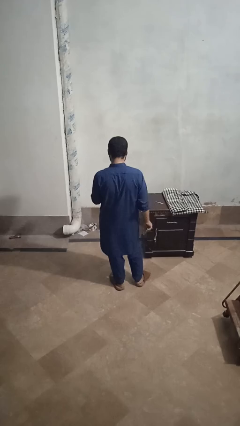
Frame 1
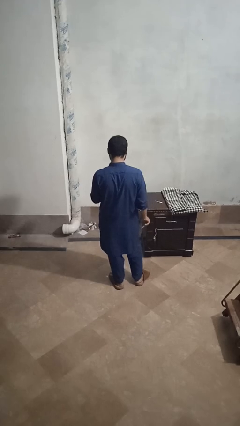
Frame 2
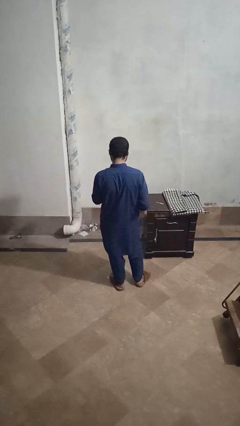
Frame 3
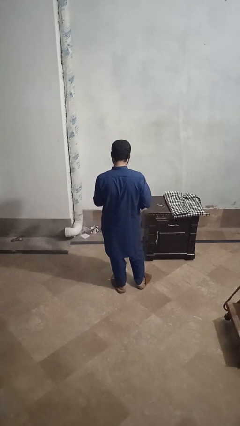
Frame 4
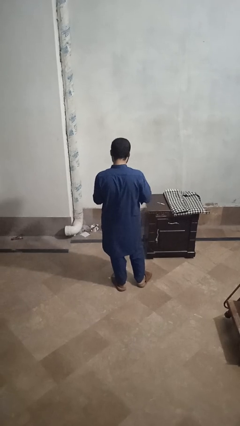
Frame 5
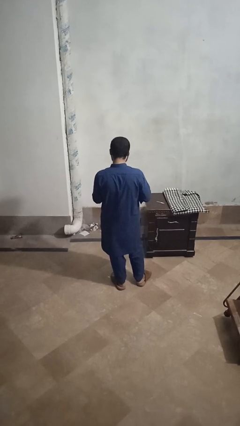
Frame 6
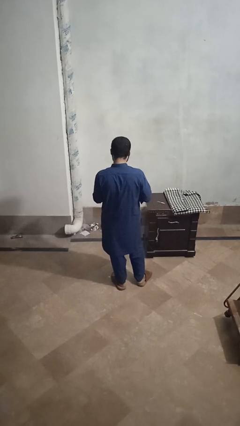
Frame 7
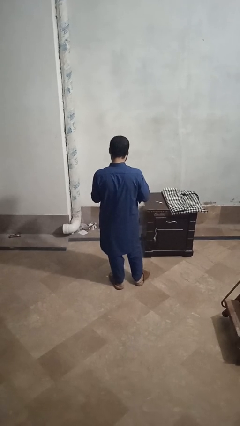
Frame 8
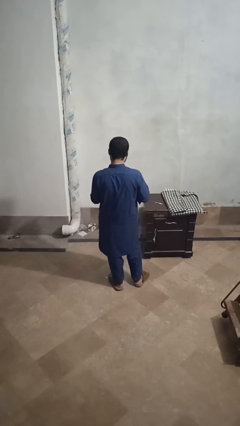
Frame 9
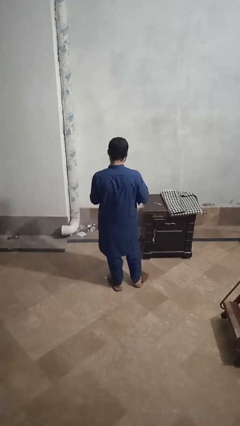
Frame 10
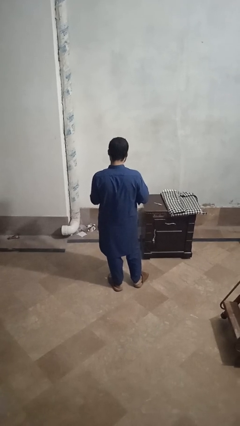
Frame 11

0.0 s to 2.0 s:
person files fingernails

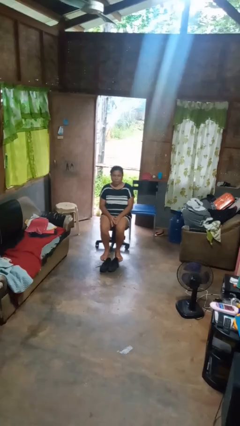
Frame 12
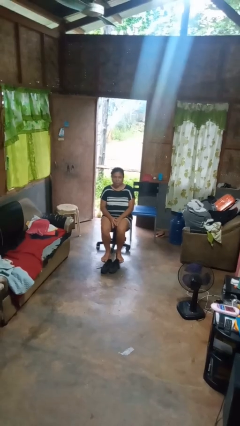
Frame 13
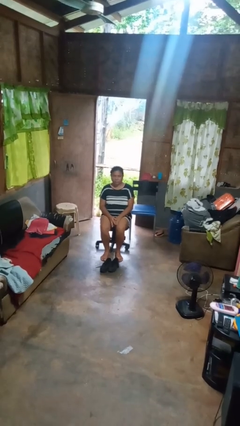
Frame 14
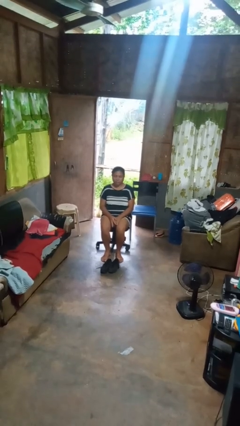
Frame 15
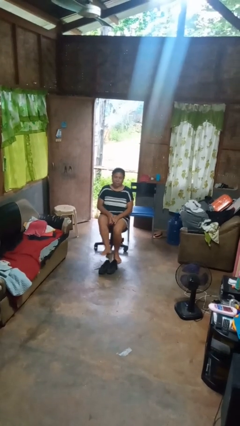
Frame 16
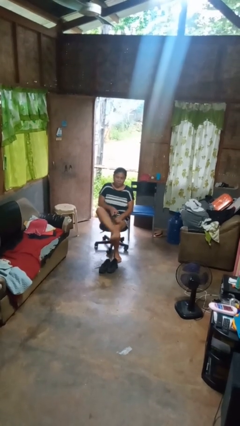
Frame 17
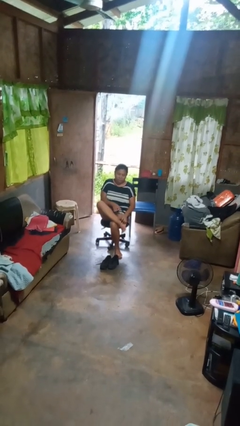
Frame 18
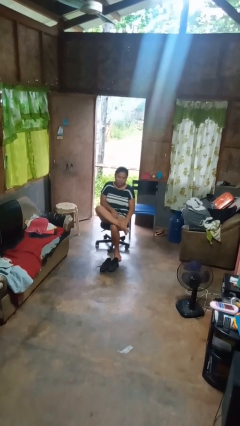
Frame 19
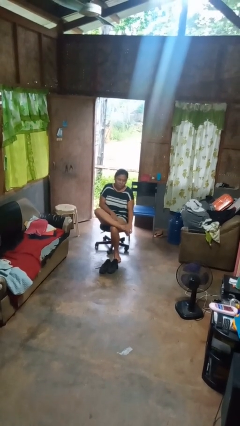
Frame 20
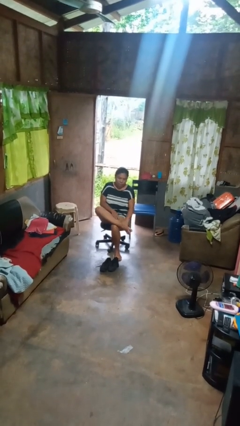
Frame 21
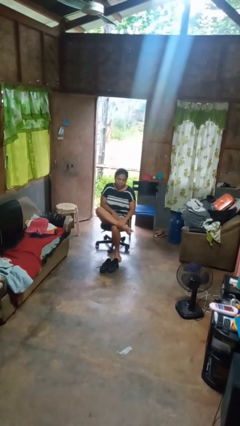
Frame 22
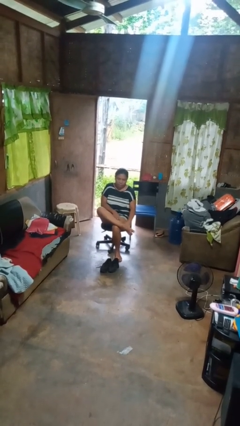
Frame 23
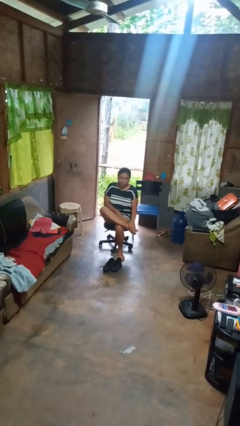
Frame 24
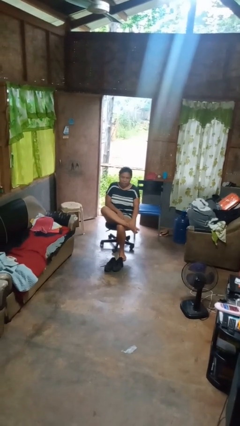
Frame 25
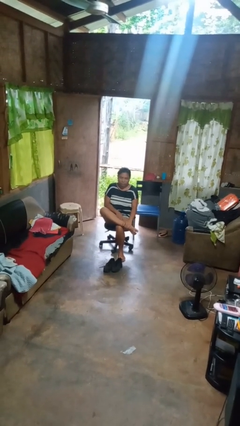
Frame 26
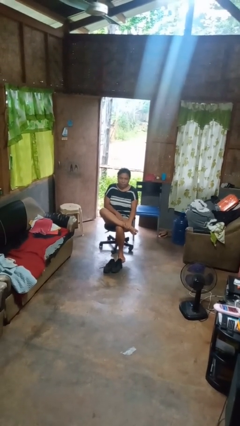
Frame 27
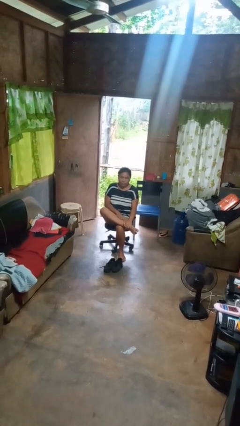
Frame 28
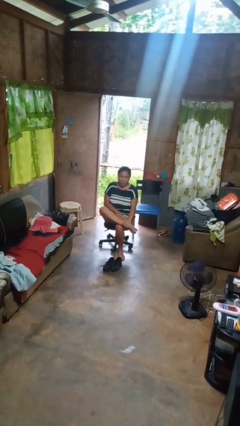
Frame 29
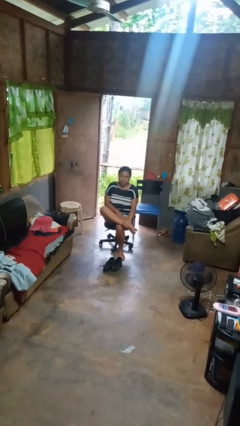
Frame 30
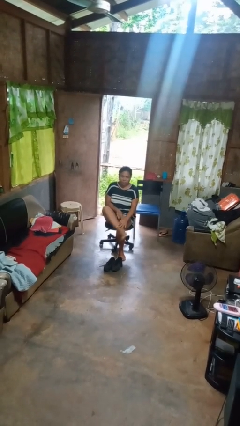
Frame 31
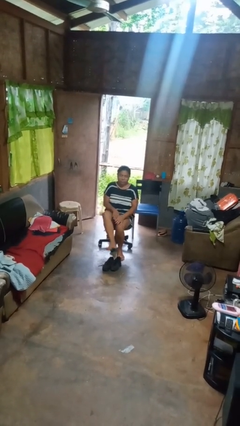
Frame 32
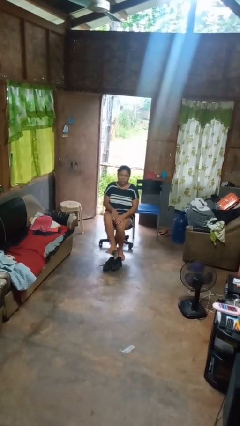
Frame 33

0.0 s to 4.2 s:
person rubs foot

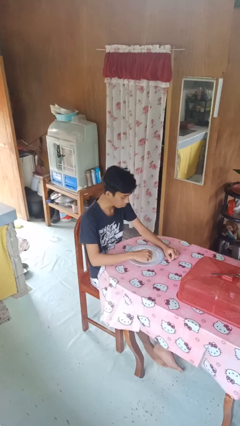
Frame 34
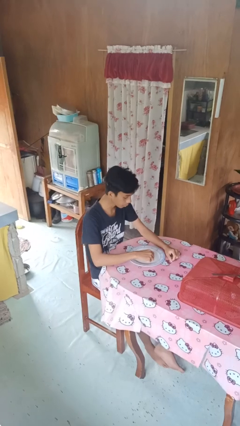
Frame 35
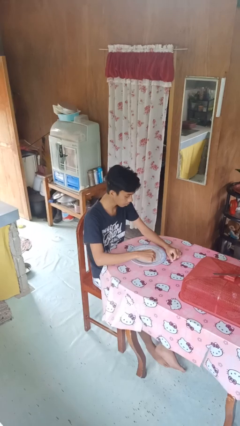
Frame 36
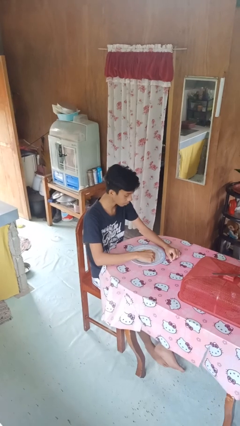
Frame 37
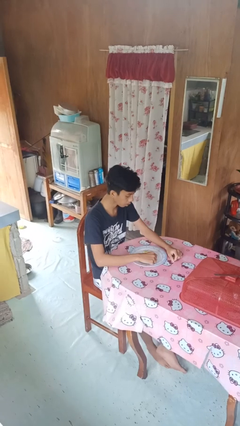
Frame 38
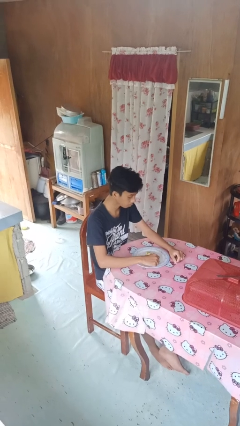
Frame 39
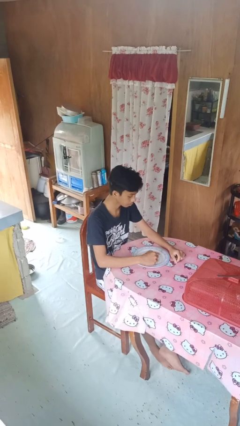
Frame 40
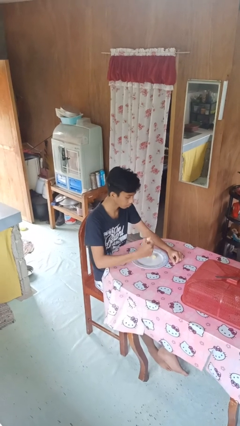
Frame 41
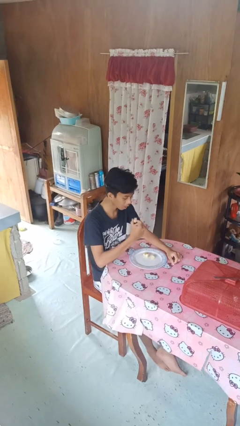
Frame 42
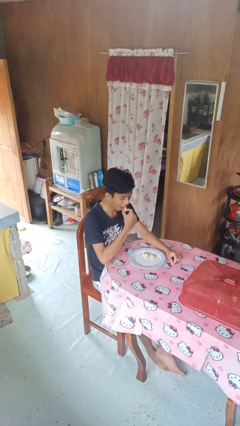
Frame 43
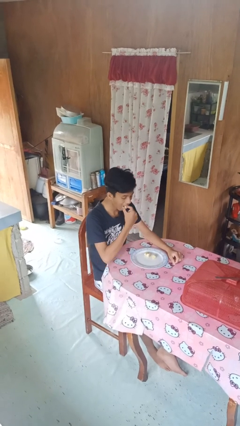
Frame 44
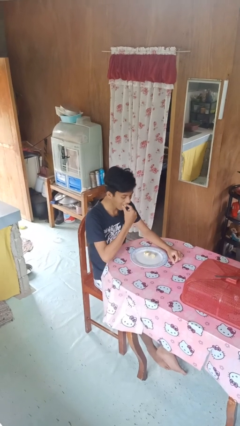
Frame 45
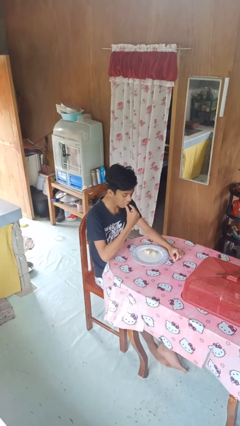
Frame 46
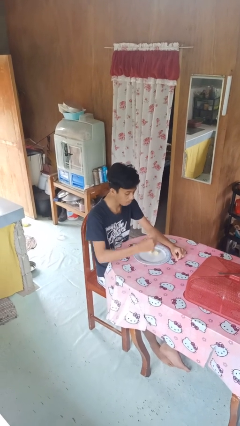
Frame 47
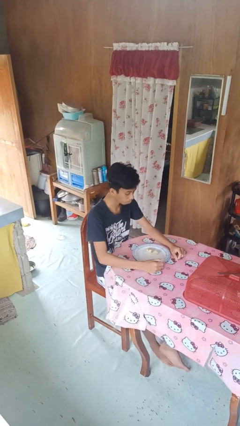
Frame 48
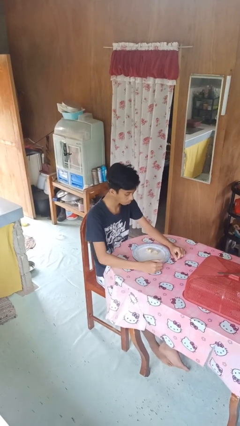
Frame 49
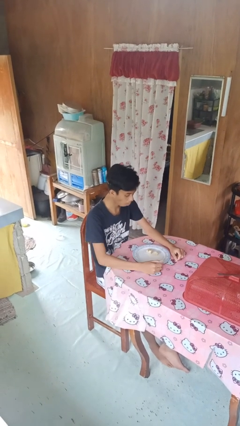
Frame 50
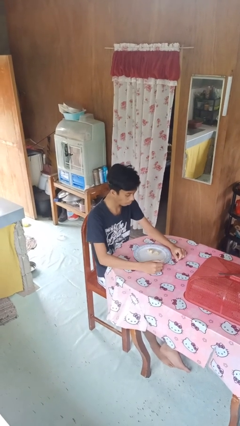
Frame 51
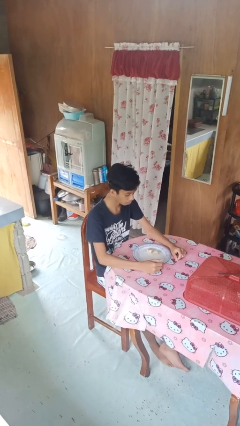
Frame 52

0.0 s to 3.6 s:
person eats with hands

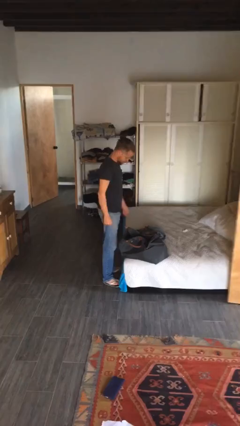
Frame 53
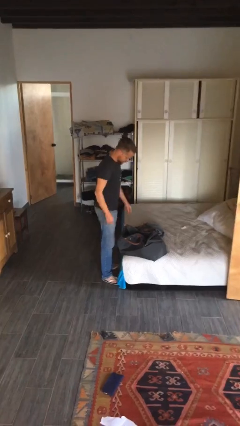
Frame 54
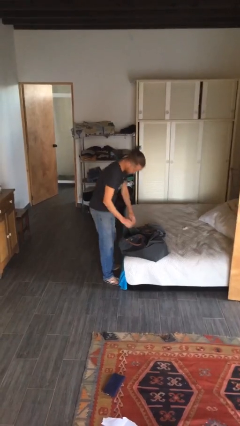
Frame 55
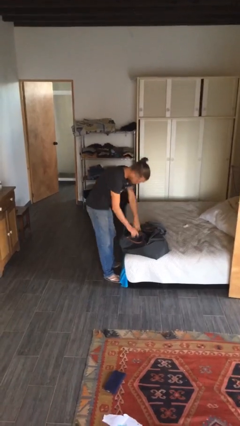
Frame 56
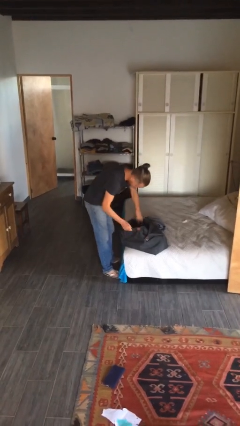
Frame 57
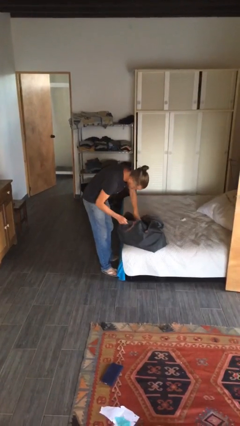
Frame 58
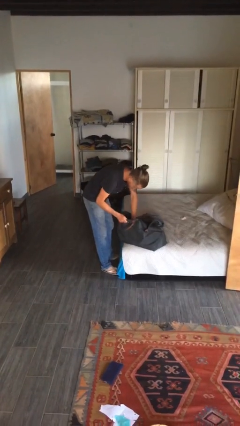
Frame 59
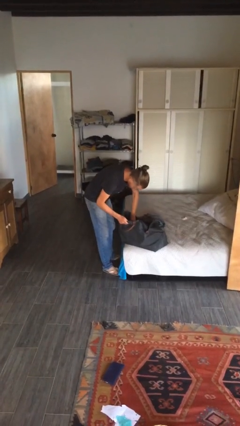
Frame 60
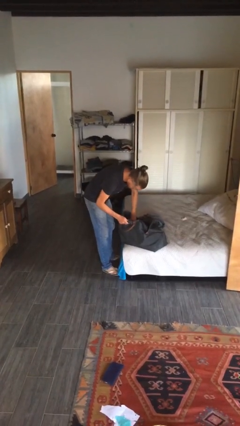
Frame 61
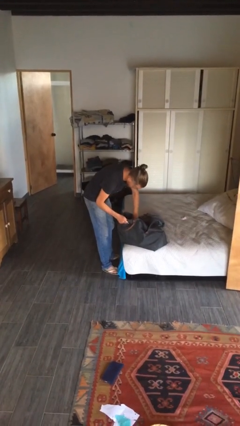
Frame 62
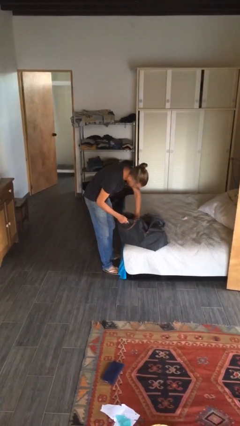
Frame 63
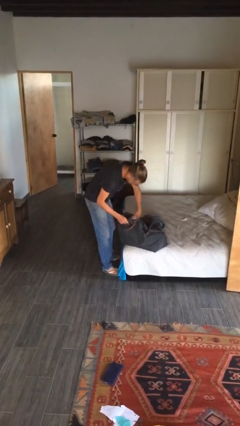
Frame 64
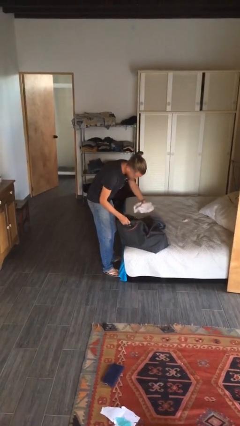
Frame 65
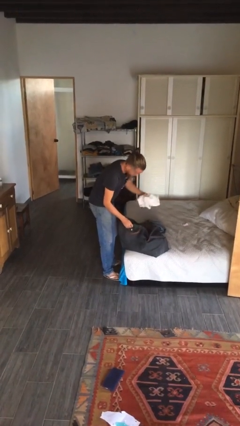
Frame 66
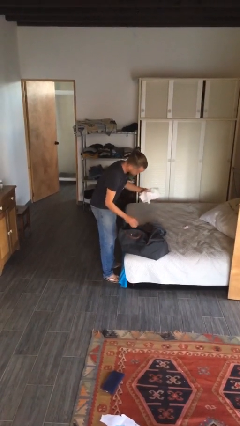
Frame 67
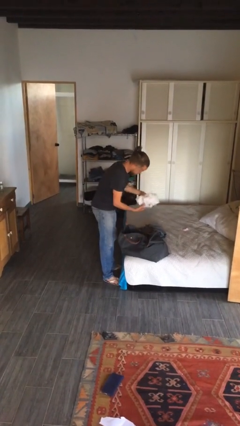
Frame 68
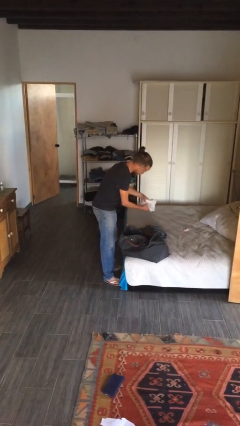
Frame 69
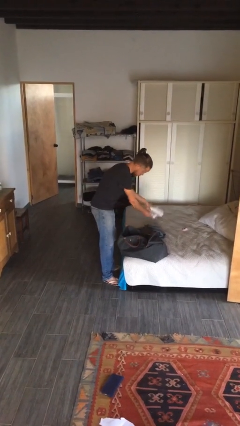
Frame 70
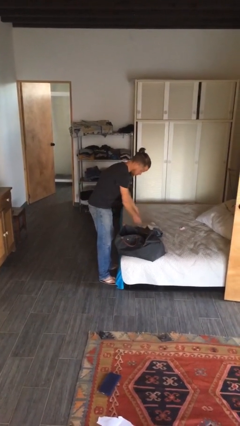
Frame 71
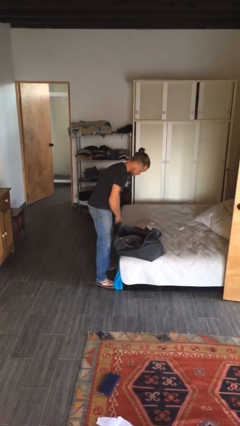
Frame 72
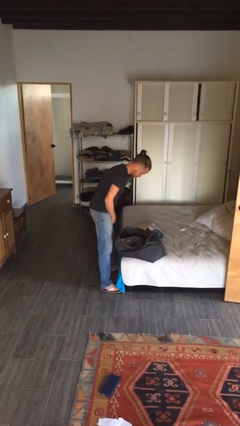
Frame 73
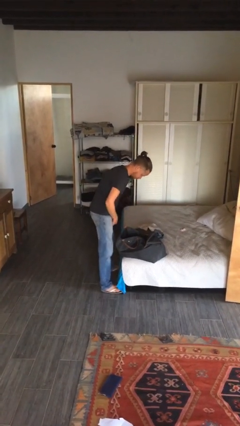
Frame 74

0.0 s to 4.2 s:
person unloads clothes from suitcase

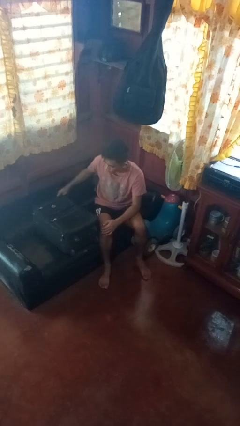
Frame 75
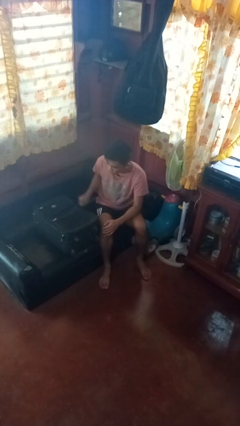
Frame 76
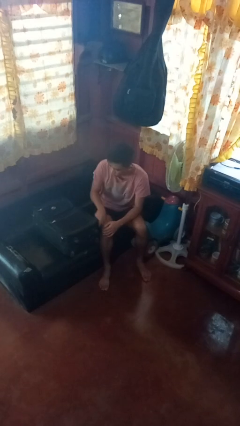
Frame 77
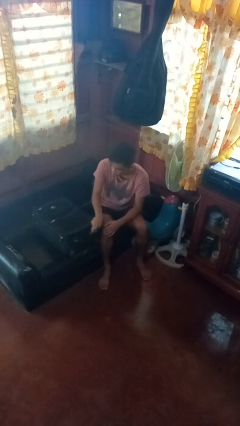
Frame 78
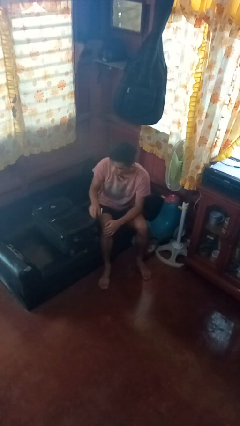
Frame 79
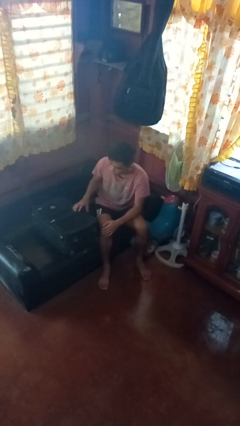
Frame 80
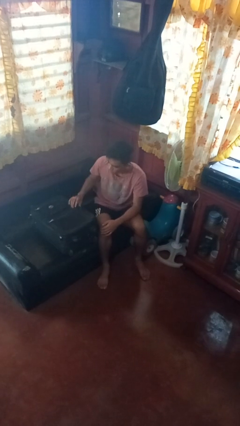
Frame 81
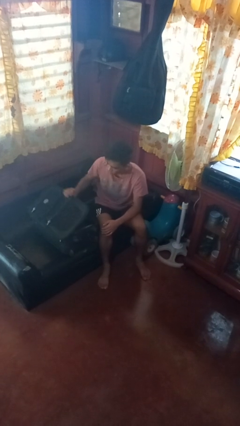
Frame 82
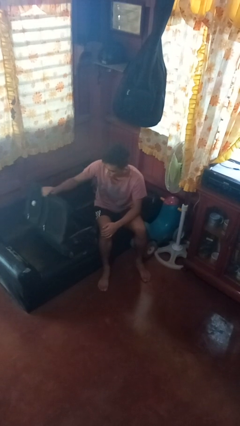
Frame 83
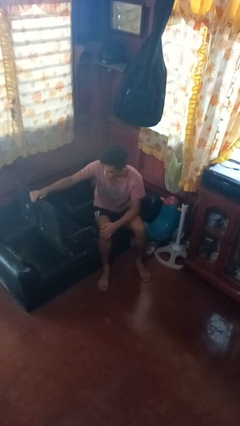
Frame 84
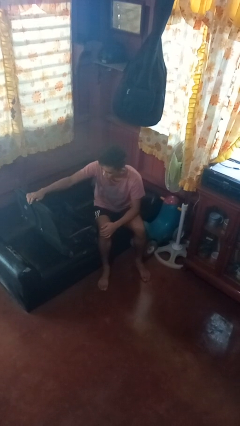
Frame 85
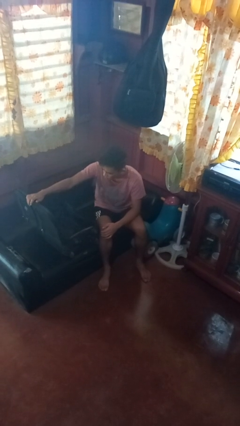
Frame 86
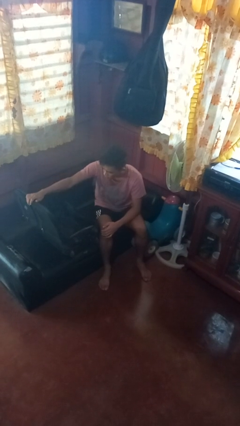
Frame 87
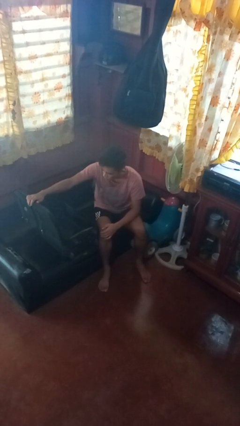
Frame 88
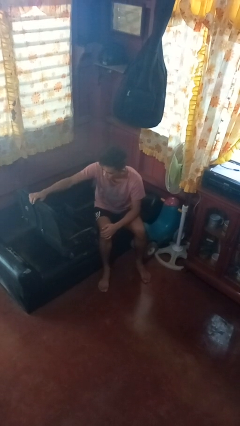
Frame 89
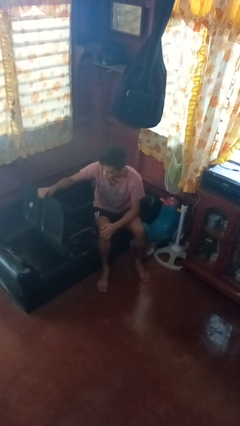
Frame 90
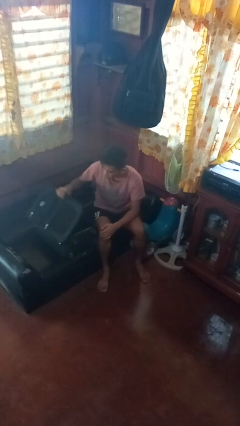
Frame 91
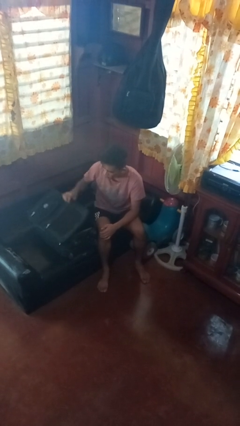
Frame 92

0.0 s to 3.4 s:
person opens suitcase

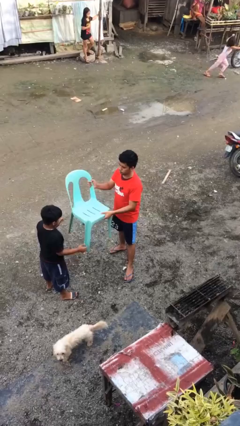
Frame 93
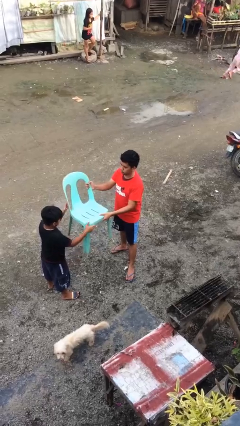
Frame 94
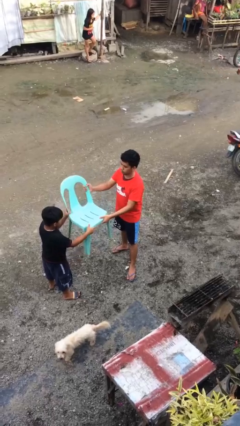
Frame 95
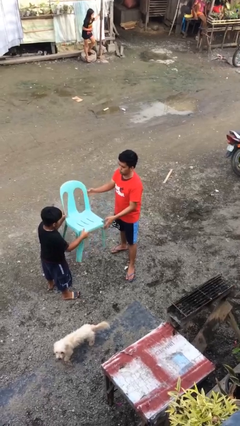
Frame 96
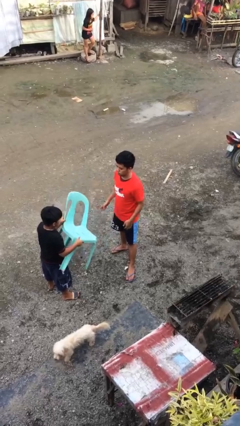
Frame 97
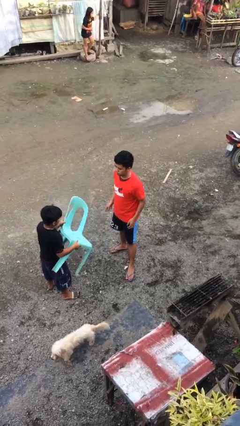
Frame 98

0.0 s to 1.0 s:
person transfers object to person
